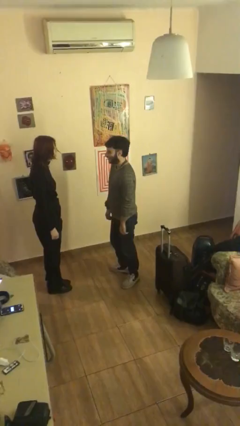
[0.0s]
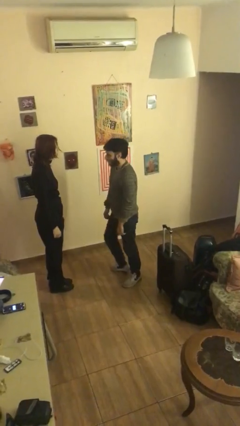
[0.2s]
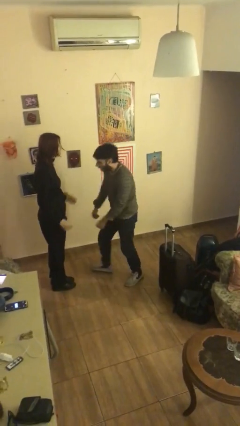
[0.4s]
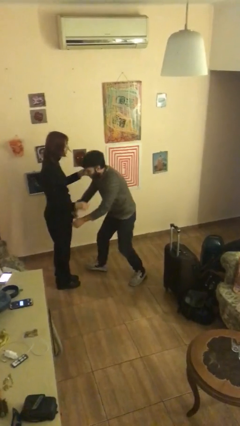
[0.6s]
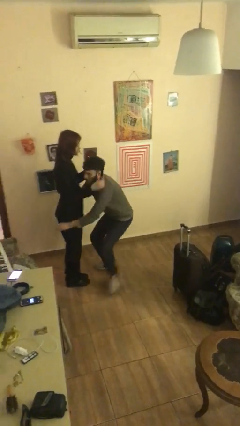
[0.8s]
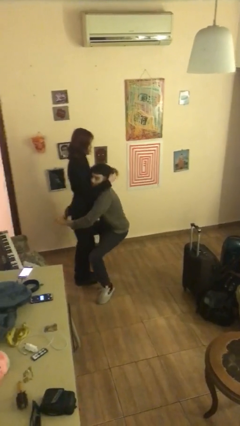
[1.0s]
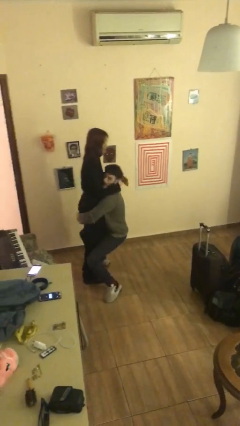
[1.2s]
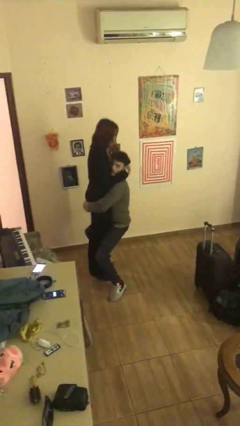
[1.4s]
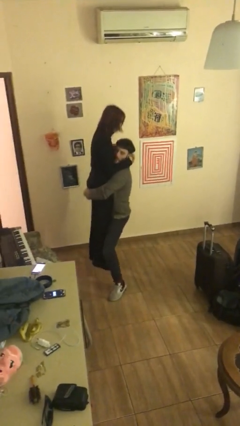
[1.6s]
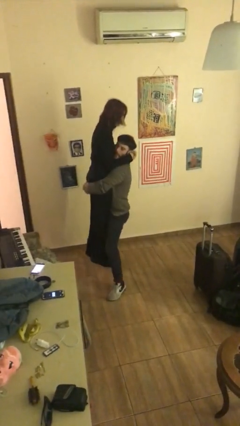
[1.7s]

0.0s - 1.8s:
person picks up person

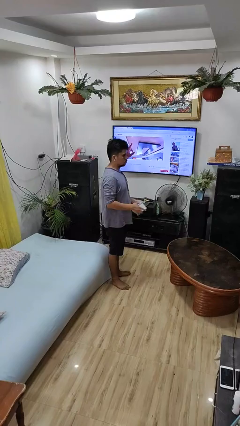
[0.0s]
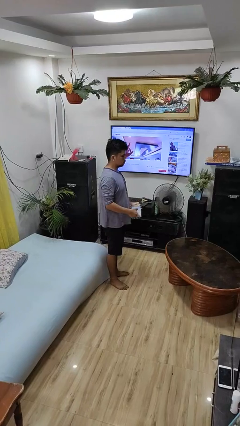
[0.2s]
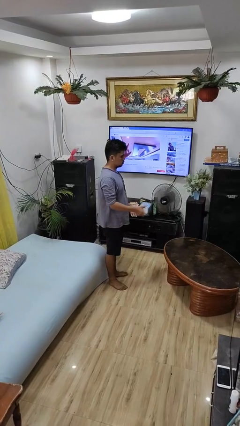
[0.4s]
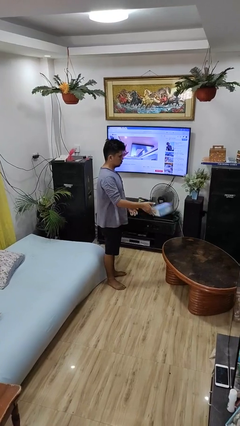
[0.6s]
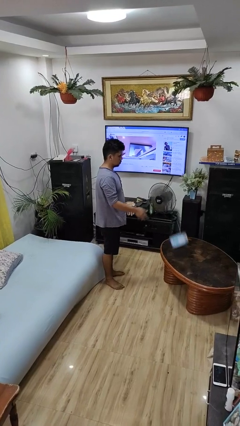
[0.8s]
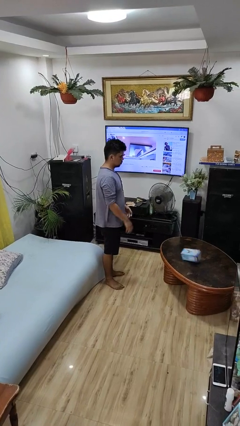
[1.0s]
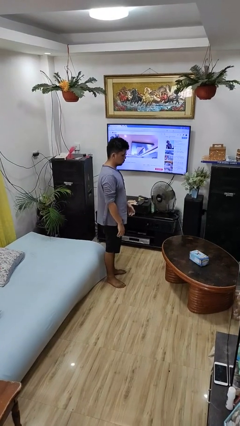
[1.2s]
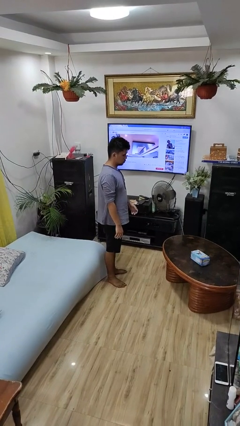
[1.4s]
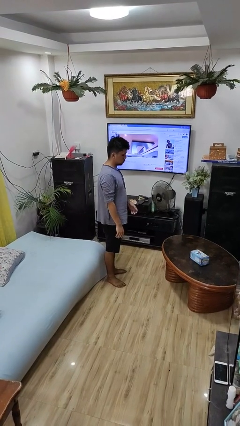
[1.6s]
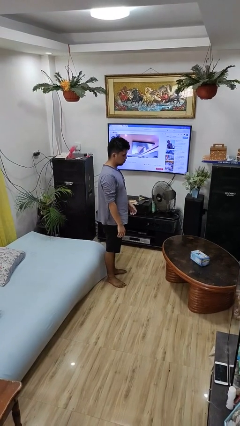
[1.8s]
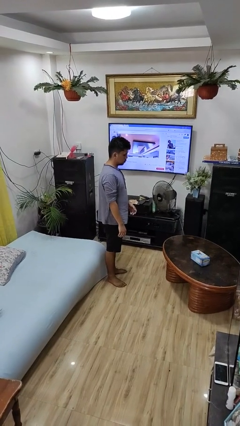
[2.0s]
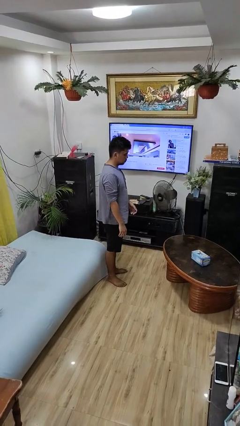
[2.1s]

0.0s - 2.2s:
person throws object on table

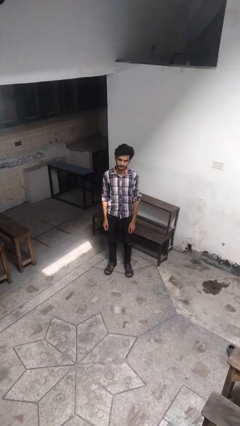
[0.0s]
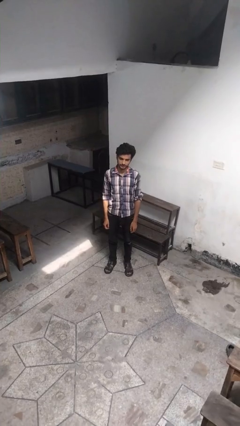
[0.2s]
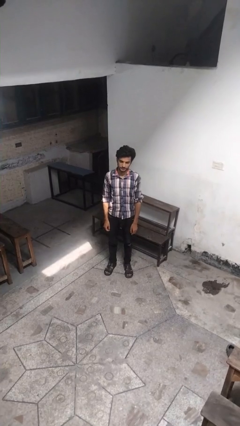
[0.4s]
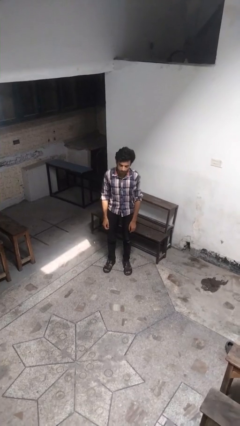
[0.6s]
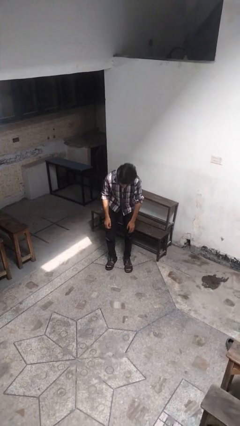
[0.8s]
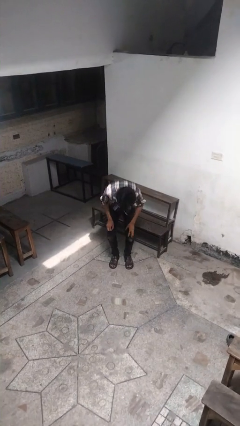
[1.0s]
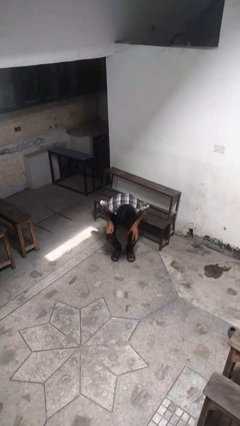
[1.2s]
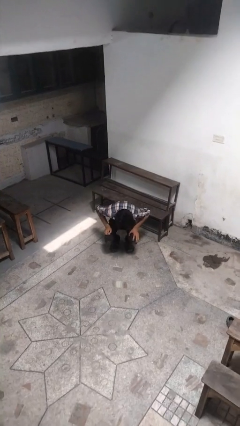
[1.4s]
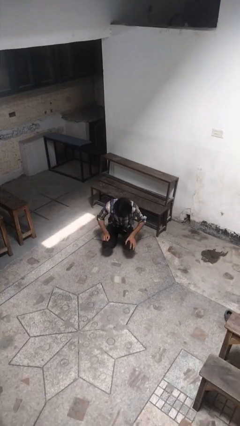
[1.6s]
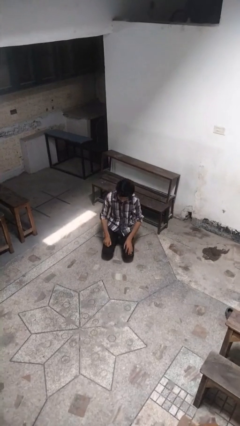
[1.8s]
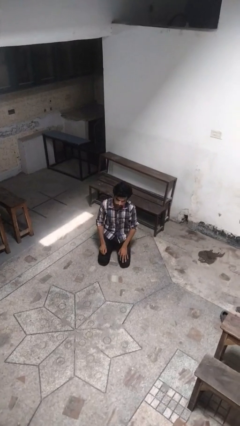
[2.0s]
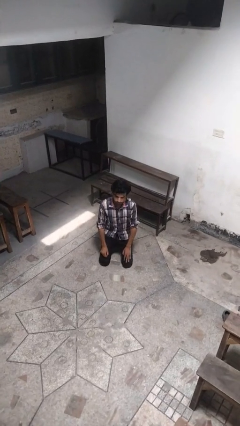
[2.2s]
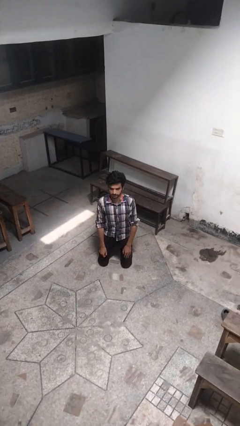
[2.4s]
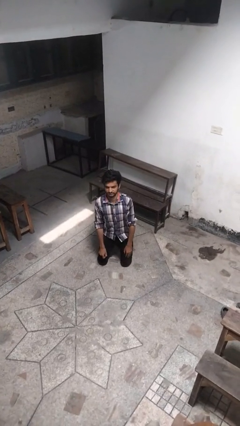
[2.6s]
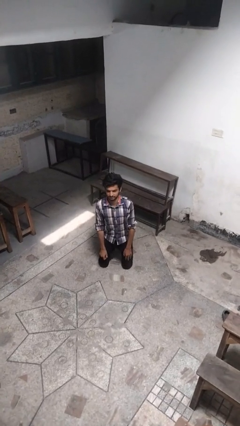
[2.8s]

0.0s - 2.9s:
person kneels

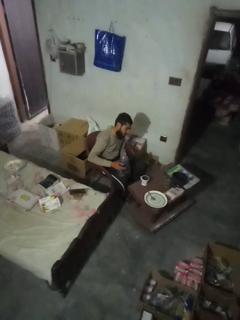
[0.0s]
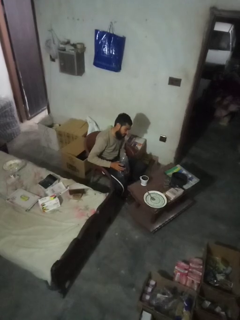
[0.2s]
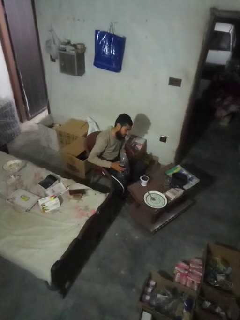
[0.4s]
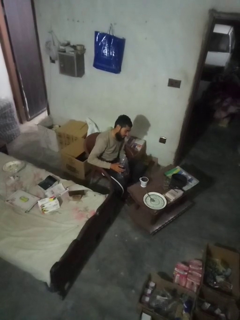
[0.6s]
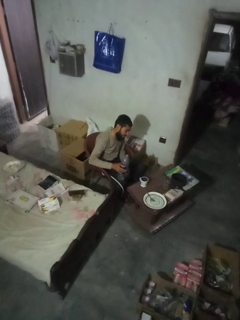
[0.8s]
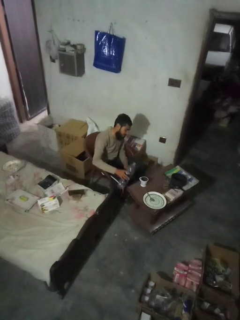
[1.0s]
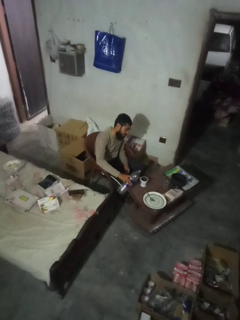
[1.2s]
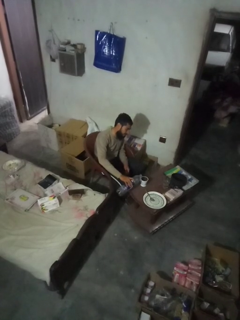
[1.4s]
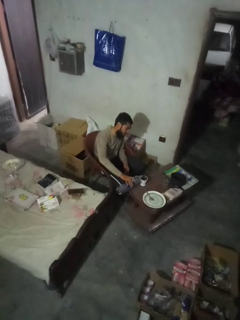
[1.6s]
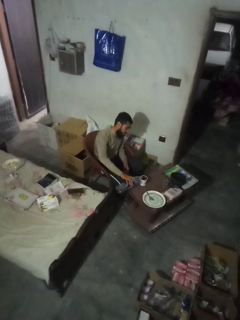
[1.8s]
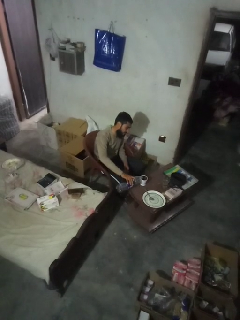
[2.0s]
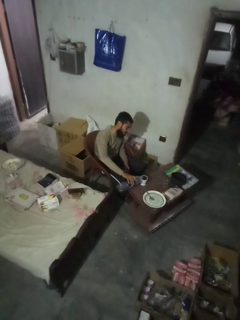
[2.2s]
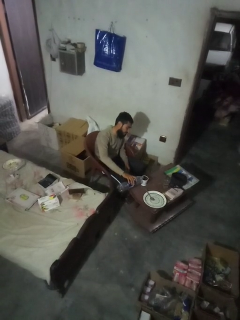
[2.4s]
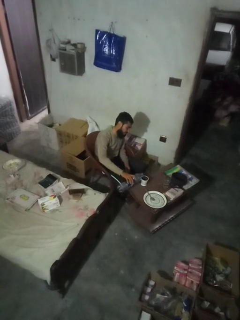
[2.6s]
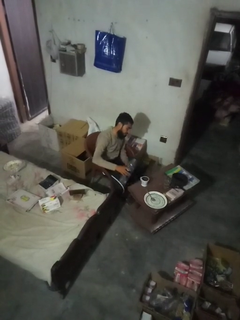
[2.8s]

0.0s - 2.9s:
person pours liquid into cup

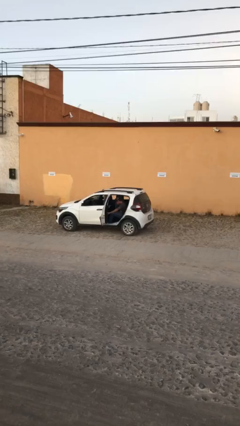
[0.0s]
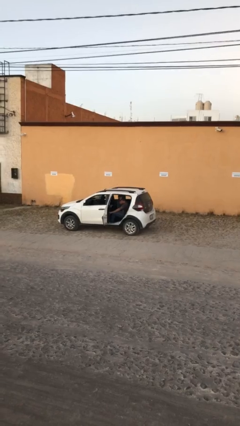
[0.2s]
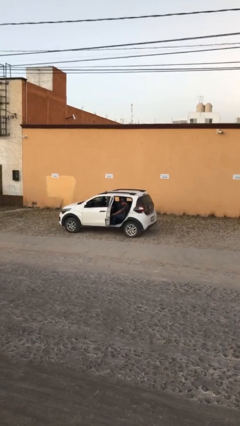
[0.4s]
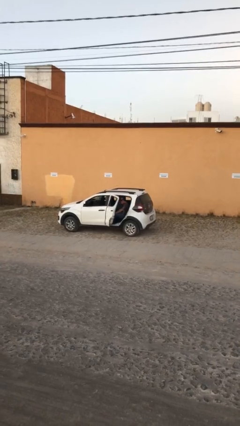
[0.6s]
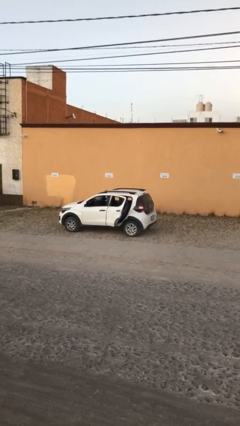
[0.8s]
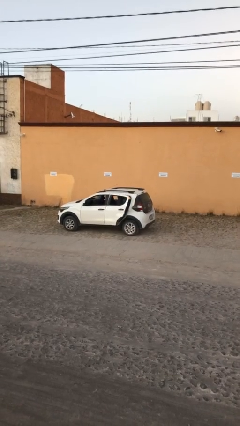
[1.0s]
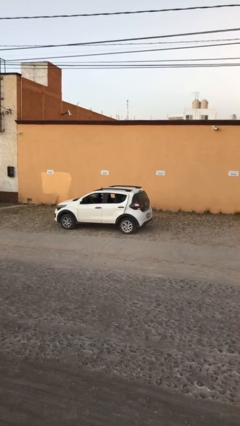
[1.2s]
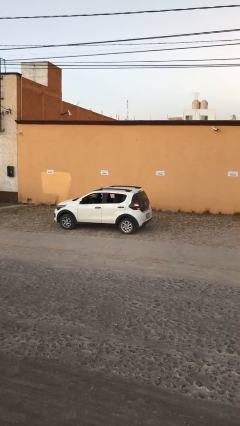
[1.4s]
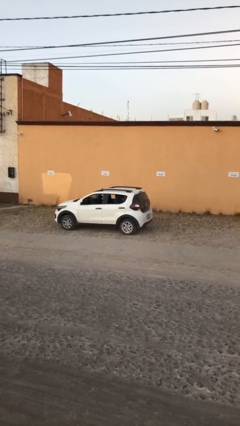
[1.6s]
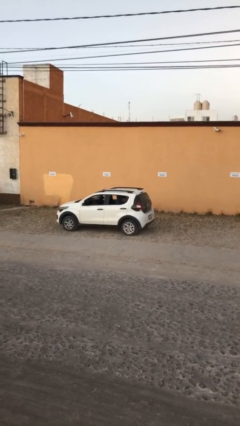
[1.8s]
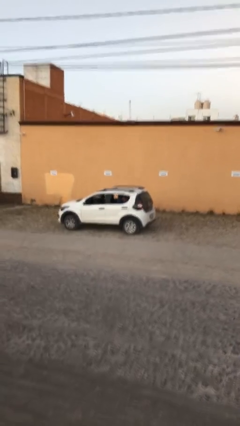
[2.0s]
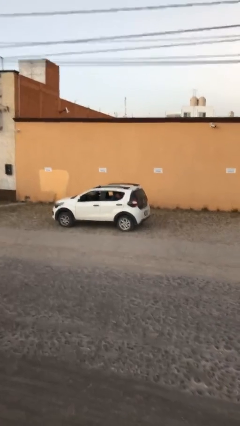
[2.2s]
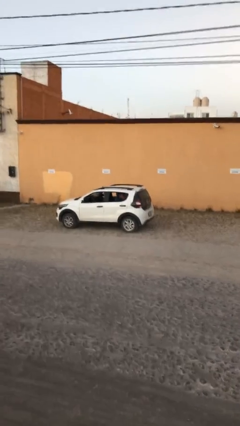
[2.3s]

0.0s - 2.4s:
person closes car door

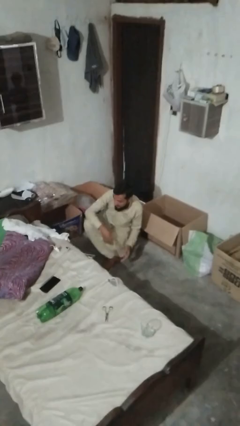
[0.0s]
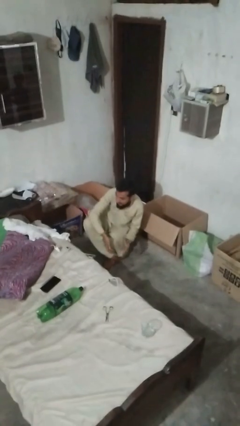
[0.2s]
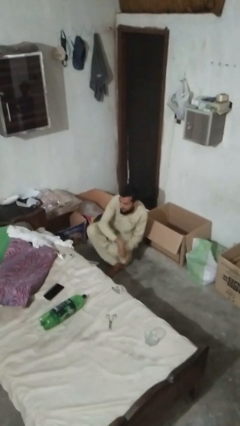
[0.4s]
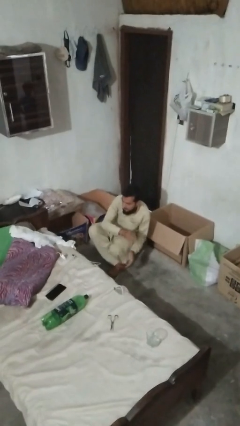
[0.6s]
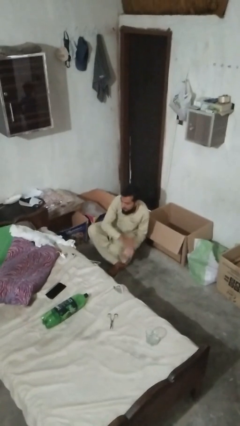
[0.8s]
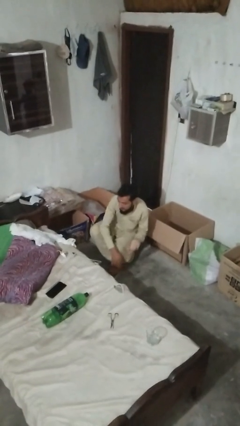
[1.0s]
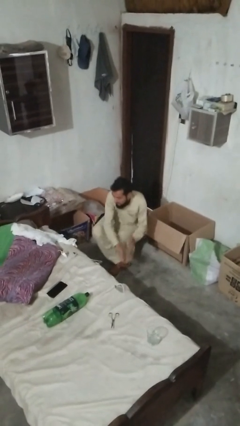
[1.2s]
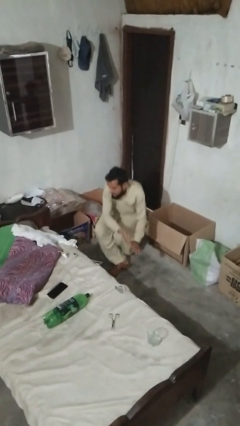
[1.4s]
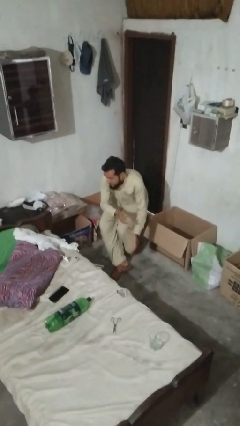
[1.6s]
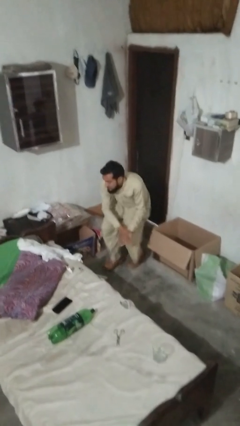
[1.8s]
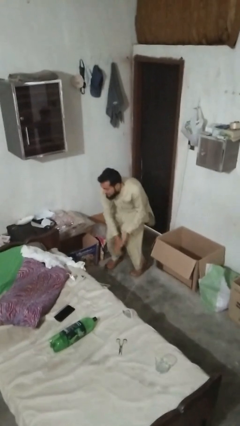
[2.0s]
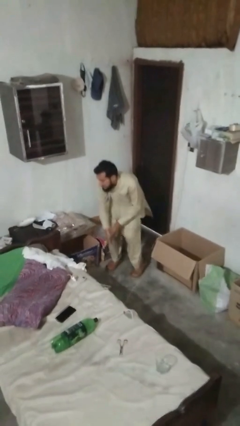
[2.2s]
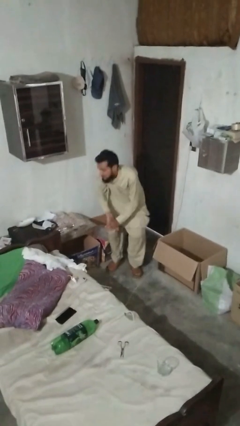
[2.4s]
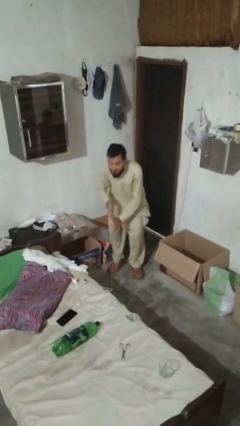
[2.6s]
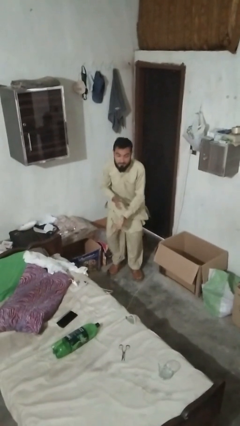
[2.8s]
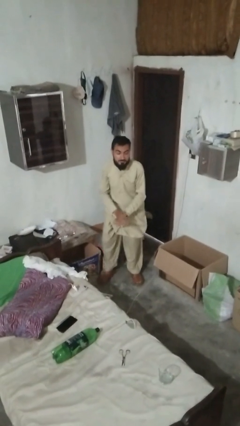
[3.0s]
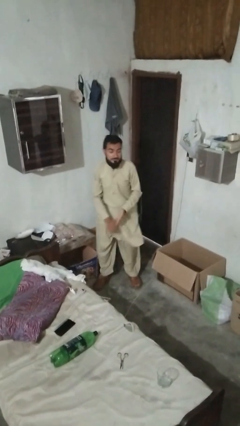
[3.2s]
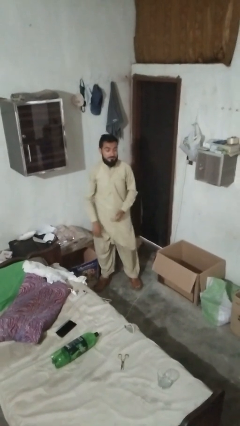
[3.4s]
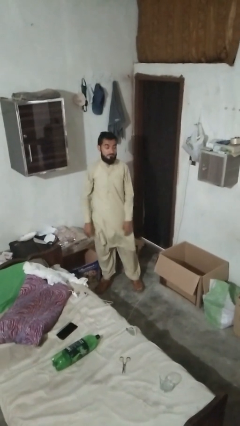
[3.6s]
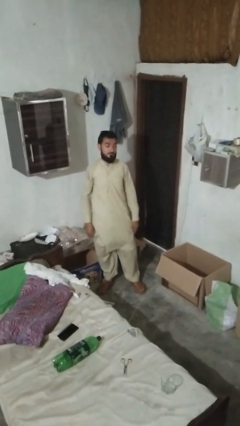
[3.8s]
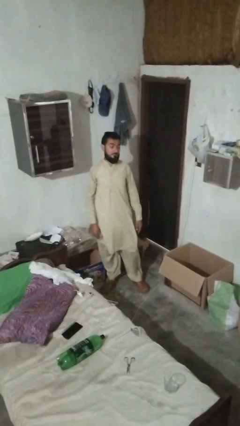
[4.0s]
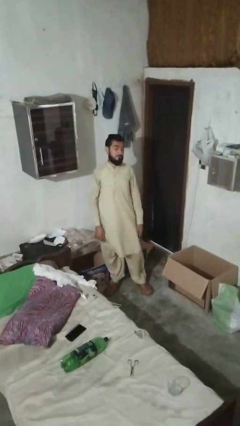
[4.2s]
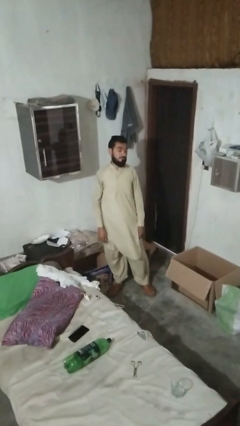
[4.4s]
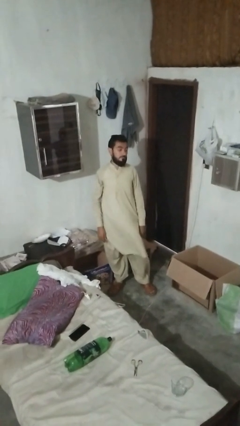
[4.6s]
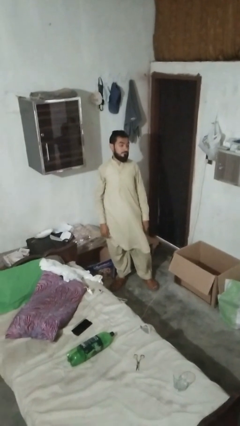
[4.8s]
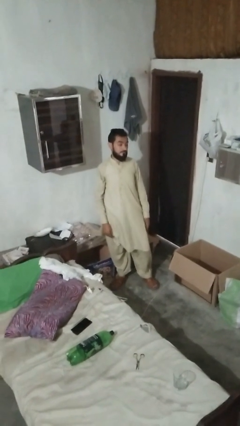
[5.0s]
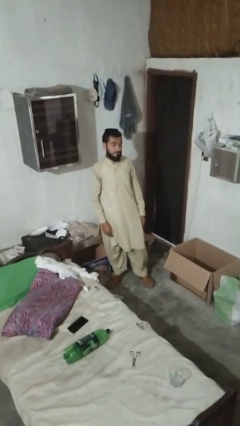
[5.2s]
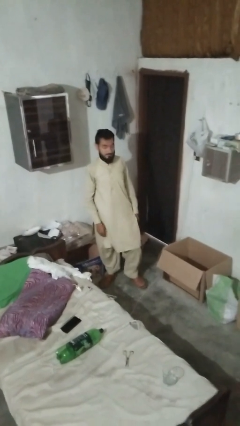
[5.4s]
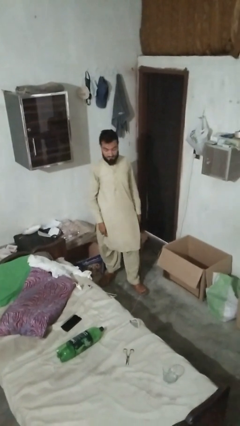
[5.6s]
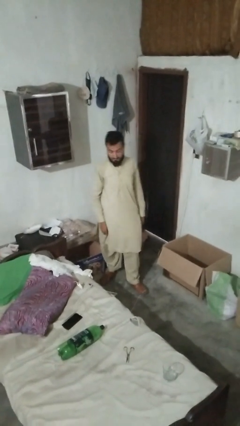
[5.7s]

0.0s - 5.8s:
person stands up from floor
